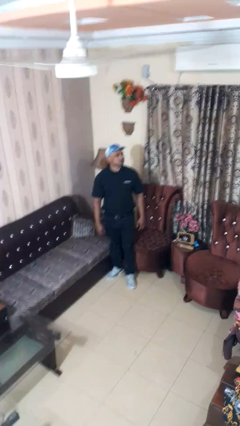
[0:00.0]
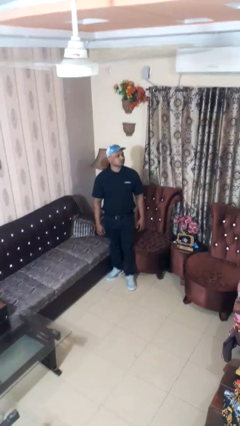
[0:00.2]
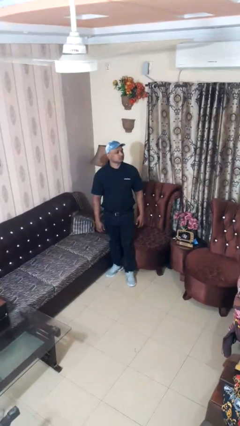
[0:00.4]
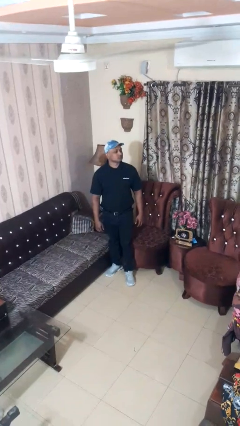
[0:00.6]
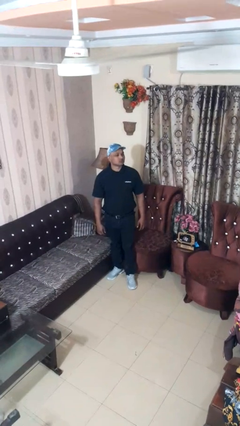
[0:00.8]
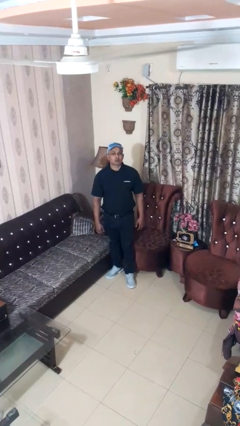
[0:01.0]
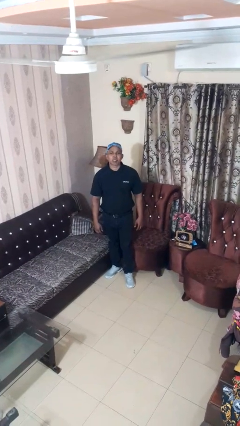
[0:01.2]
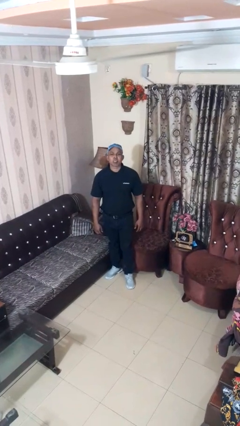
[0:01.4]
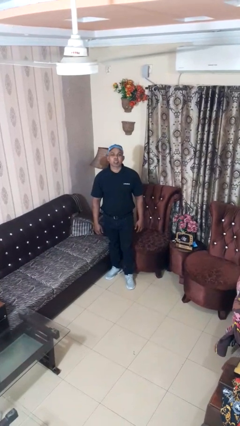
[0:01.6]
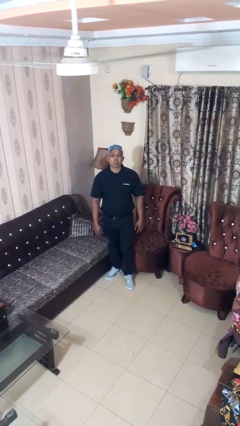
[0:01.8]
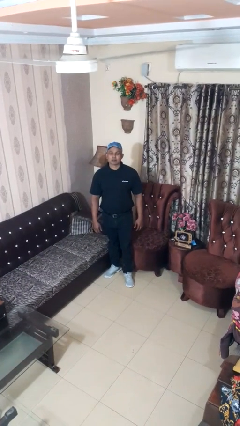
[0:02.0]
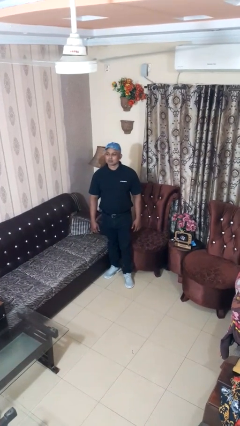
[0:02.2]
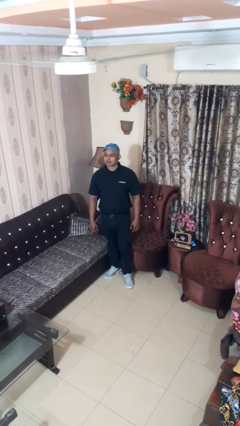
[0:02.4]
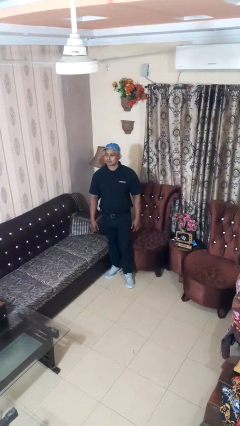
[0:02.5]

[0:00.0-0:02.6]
person sticks out tongue

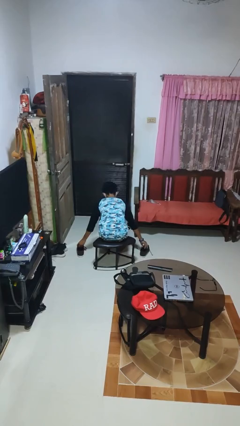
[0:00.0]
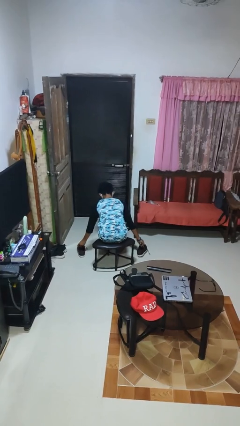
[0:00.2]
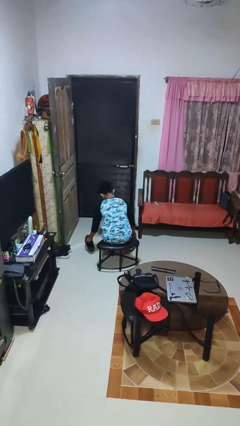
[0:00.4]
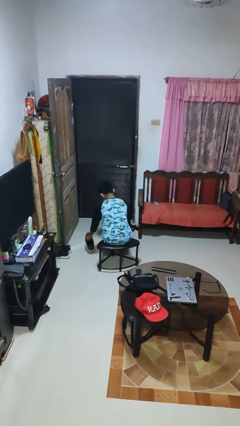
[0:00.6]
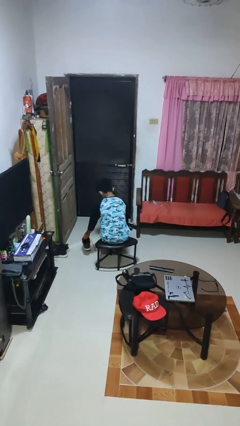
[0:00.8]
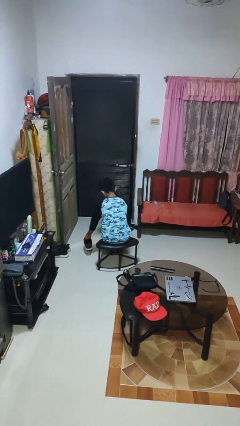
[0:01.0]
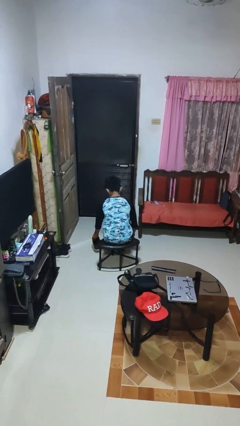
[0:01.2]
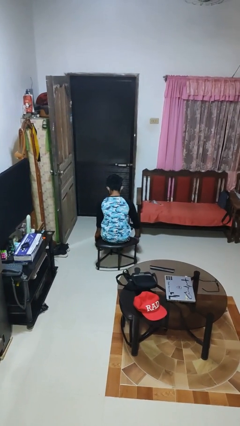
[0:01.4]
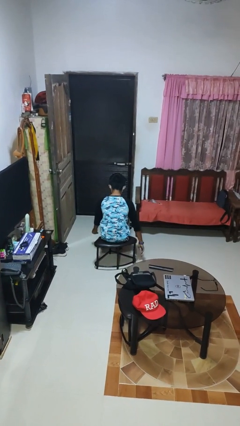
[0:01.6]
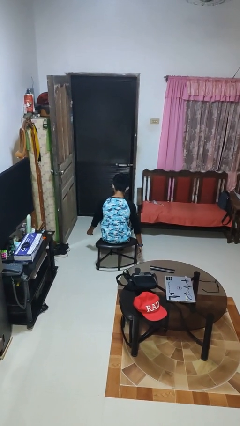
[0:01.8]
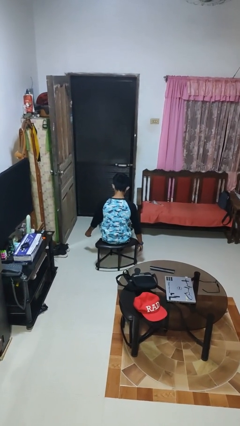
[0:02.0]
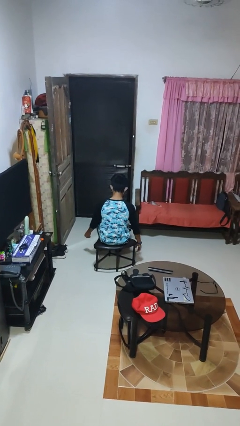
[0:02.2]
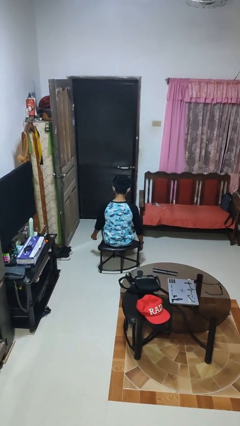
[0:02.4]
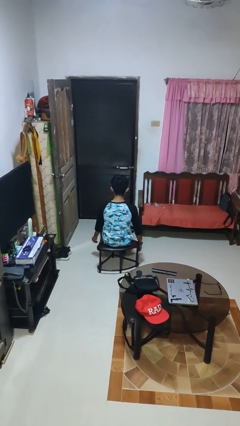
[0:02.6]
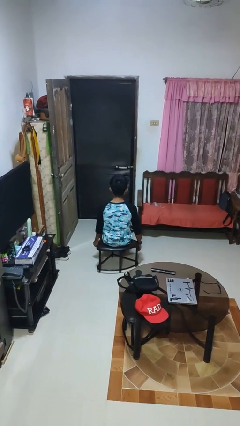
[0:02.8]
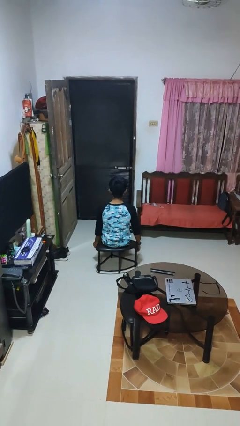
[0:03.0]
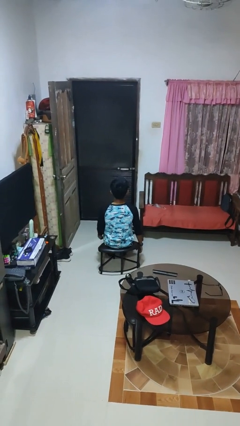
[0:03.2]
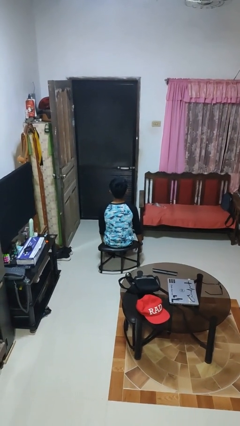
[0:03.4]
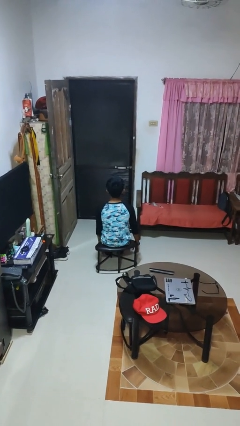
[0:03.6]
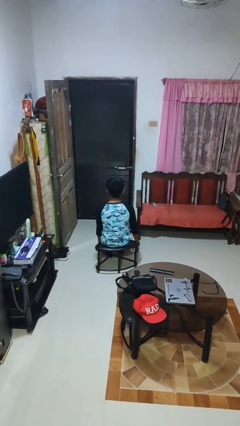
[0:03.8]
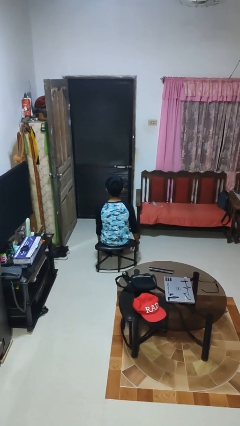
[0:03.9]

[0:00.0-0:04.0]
person puts on shoes

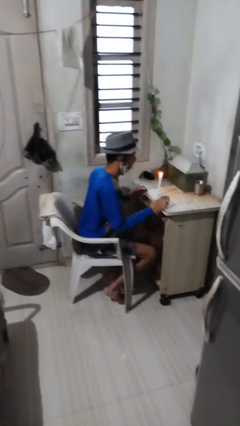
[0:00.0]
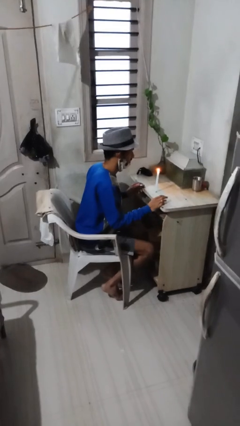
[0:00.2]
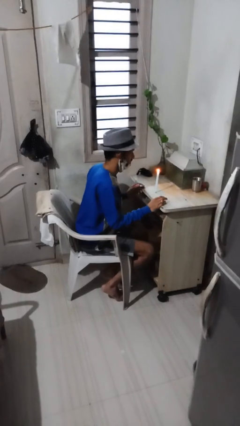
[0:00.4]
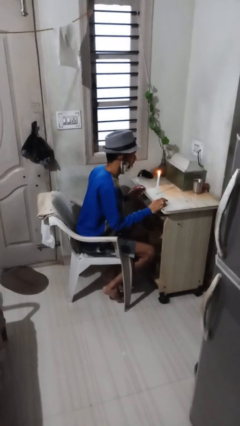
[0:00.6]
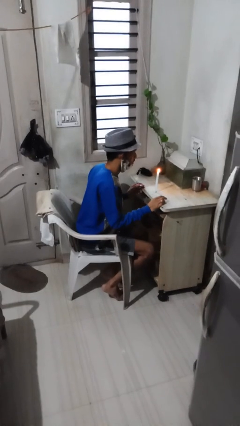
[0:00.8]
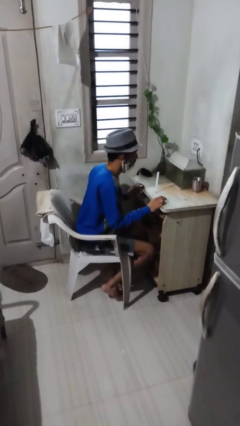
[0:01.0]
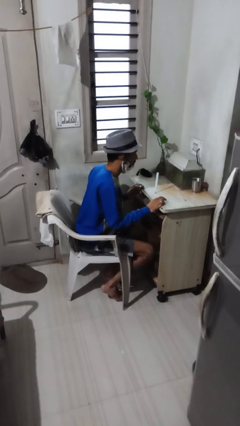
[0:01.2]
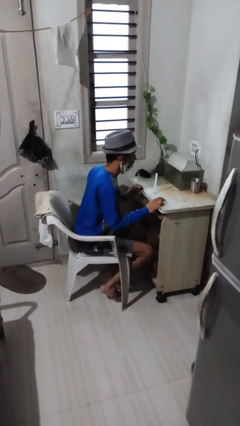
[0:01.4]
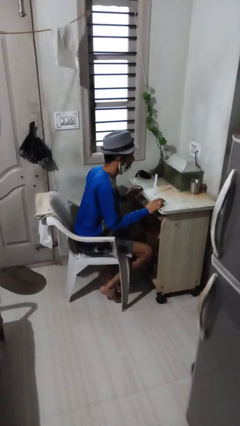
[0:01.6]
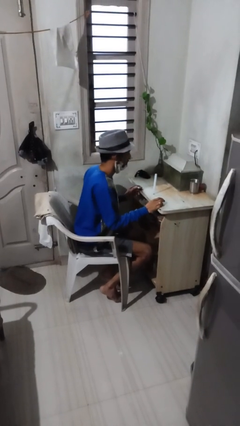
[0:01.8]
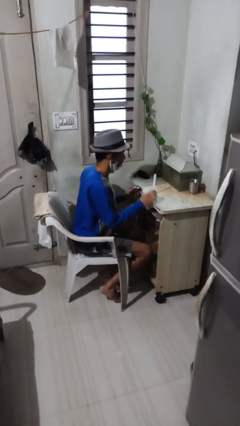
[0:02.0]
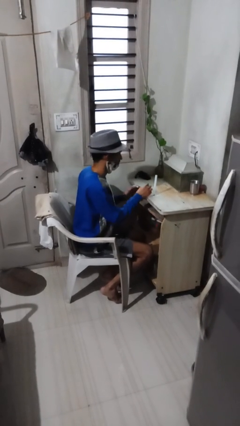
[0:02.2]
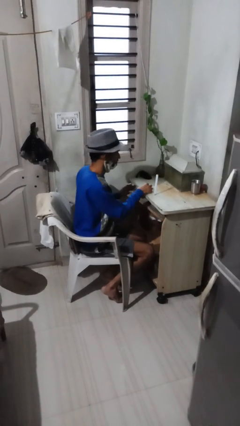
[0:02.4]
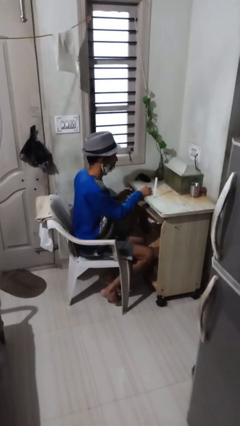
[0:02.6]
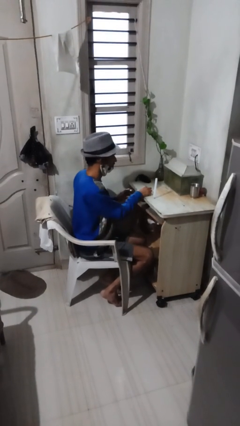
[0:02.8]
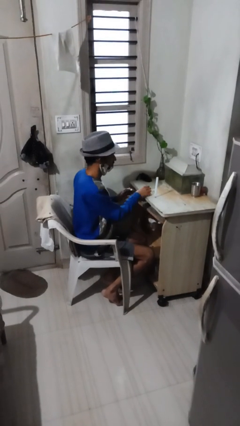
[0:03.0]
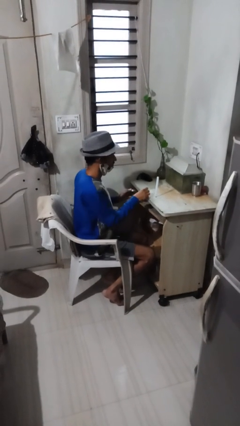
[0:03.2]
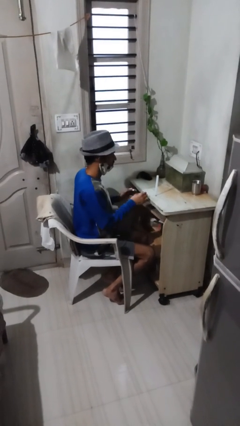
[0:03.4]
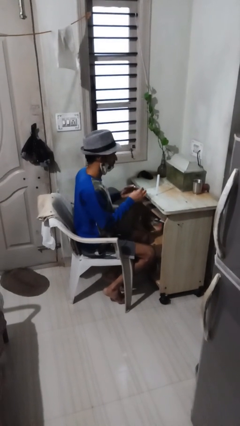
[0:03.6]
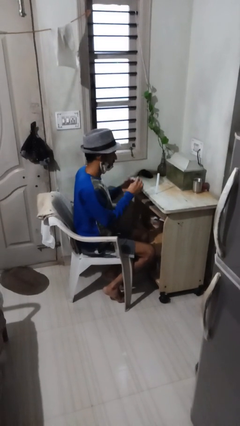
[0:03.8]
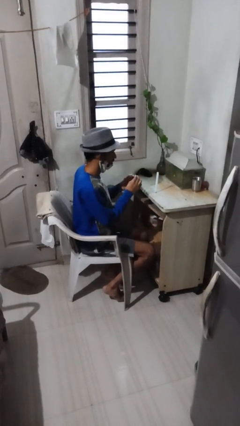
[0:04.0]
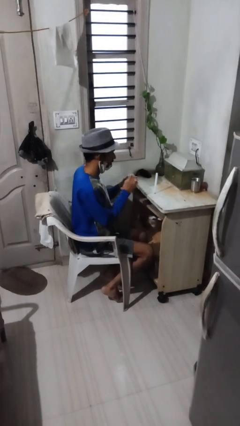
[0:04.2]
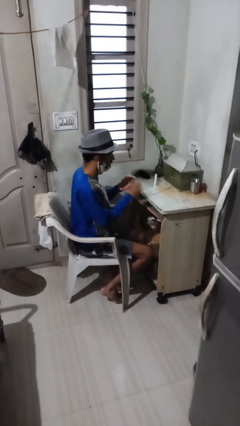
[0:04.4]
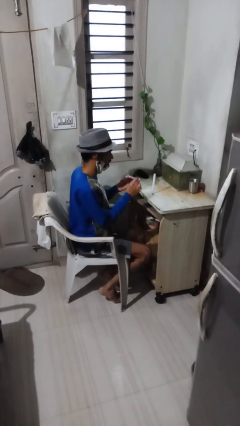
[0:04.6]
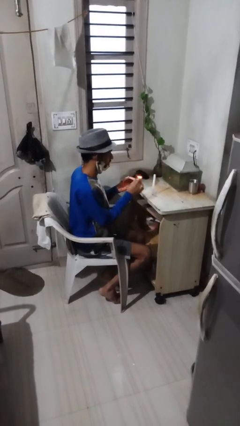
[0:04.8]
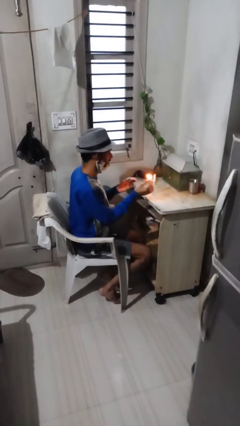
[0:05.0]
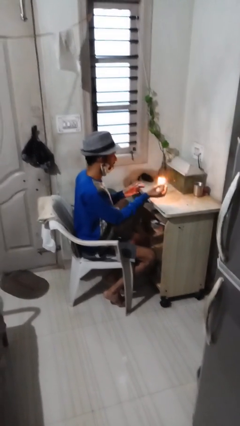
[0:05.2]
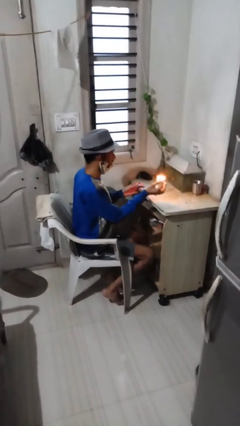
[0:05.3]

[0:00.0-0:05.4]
person extinguishes candle

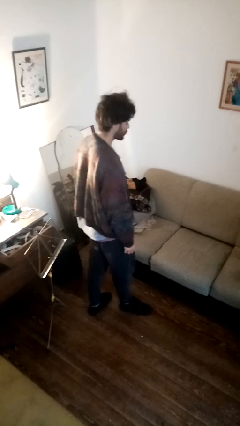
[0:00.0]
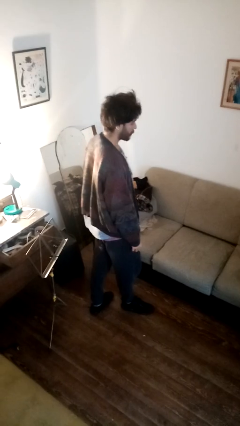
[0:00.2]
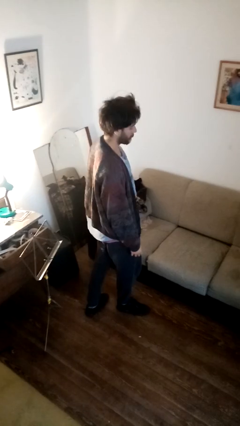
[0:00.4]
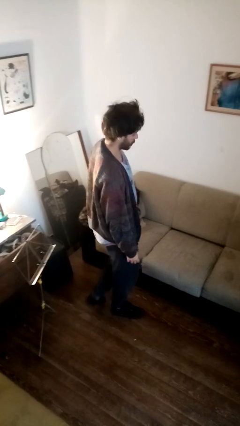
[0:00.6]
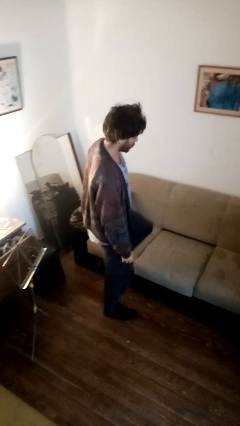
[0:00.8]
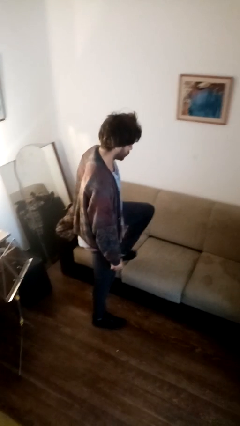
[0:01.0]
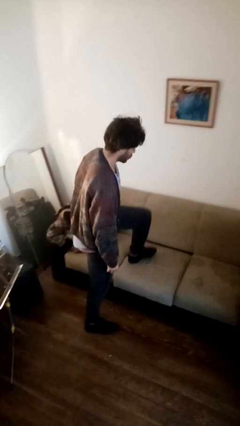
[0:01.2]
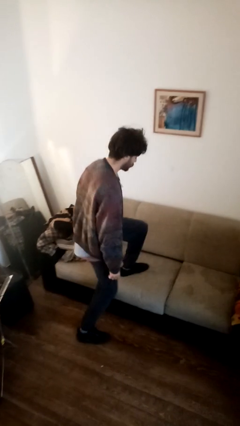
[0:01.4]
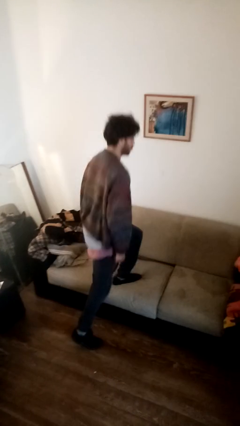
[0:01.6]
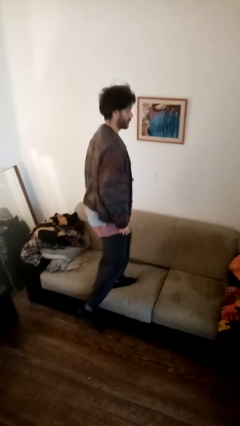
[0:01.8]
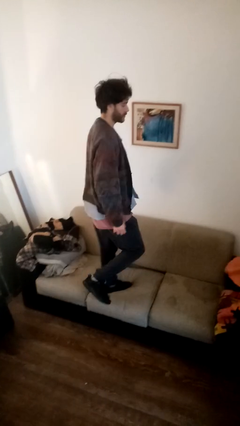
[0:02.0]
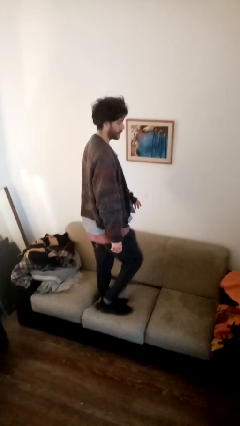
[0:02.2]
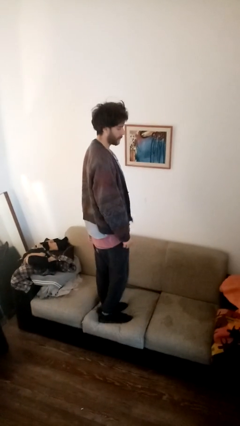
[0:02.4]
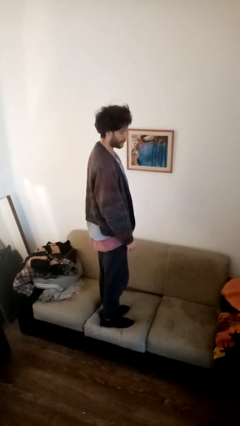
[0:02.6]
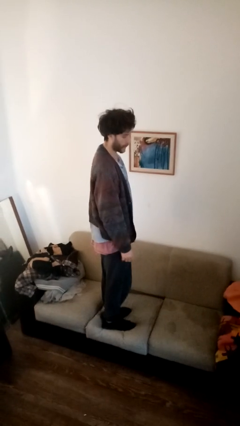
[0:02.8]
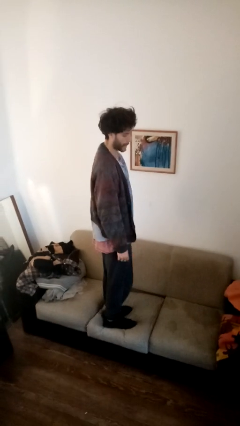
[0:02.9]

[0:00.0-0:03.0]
person climbs on couch

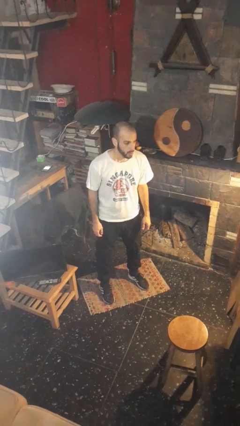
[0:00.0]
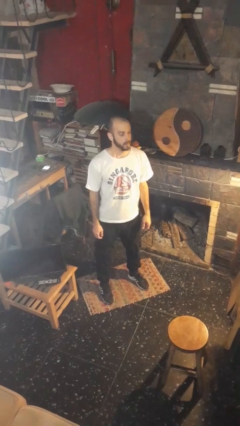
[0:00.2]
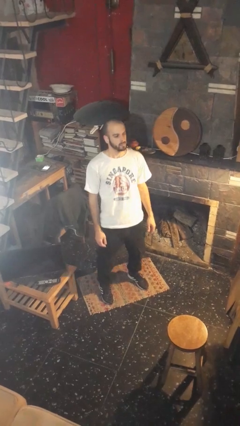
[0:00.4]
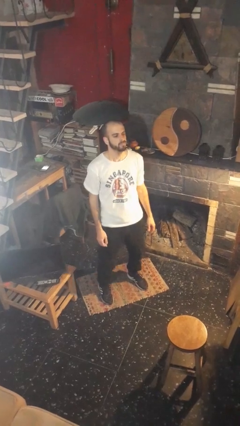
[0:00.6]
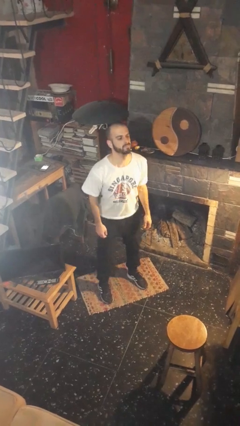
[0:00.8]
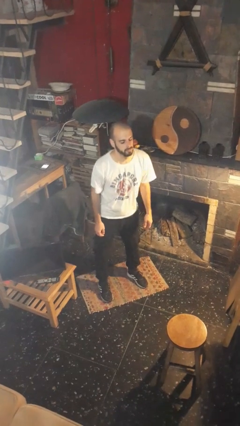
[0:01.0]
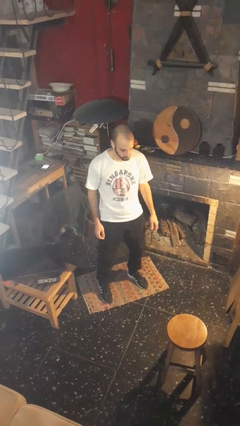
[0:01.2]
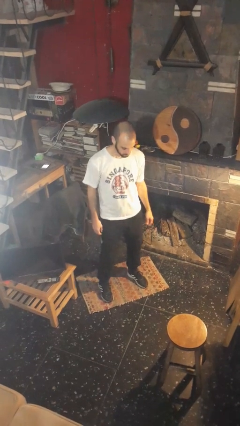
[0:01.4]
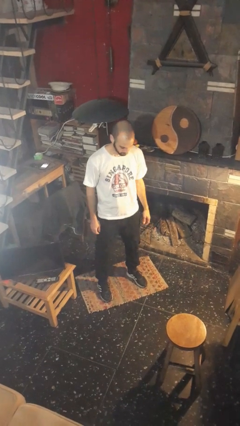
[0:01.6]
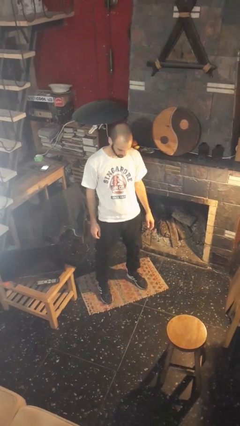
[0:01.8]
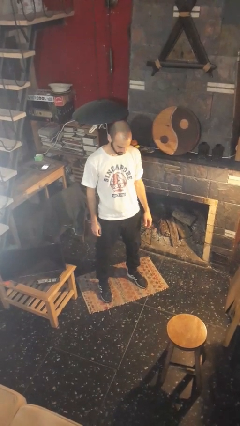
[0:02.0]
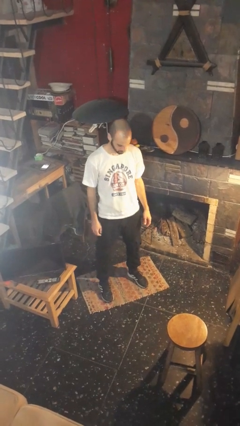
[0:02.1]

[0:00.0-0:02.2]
person wiggles hips

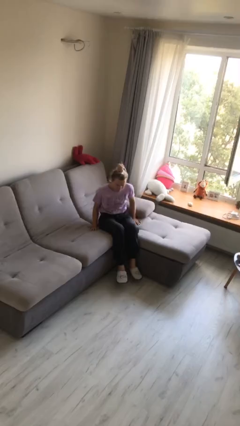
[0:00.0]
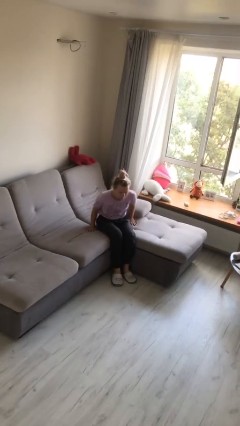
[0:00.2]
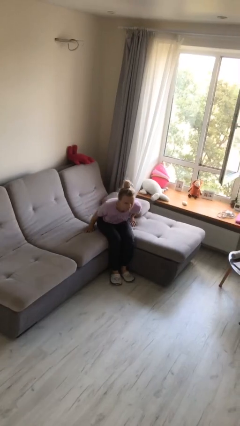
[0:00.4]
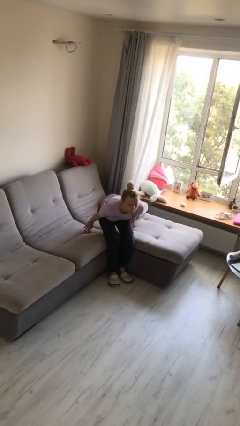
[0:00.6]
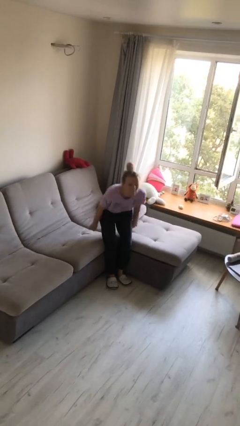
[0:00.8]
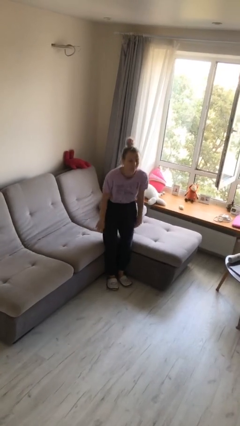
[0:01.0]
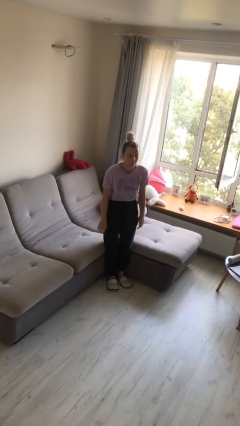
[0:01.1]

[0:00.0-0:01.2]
person stands up
